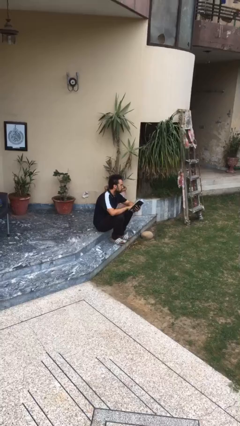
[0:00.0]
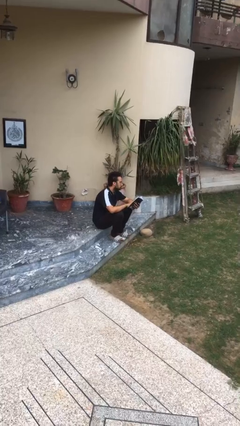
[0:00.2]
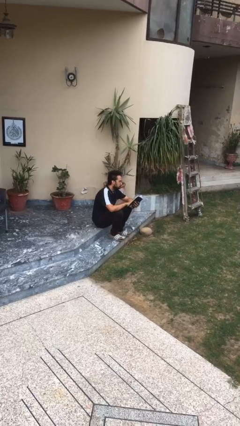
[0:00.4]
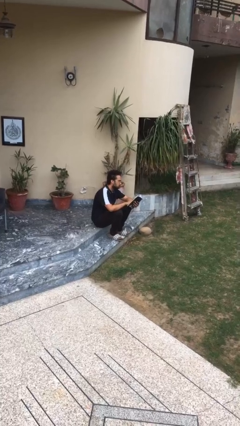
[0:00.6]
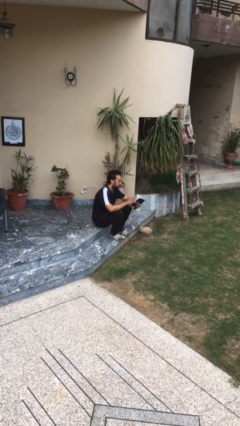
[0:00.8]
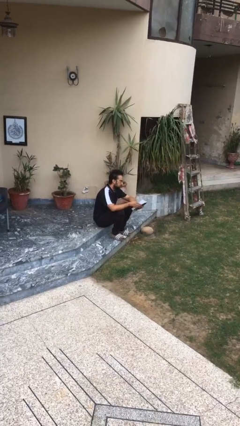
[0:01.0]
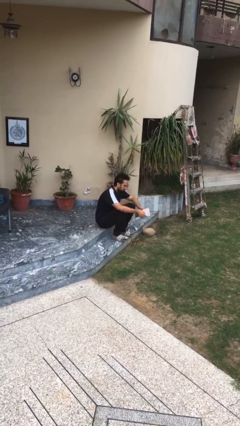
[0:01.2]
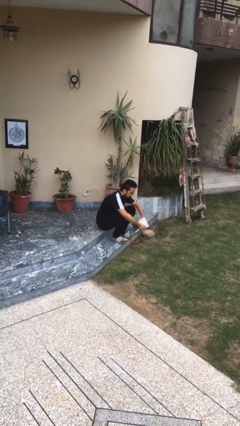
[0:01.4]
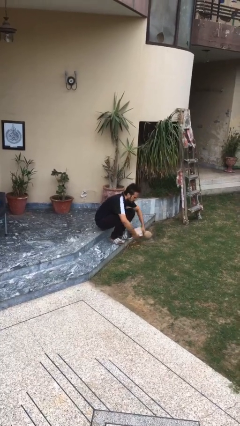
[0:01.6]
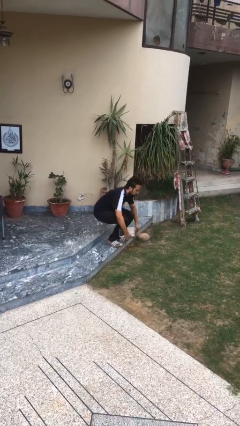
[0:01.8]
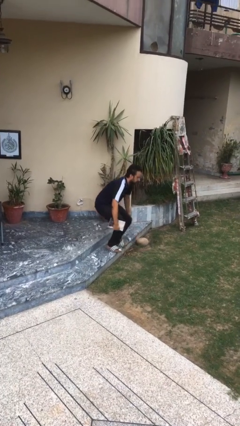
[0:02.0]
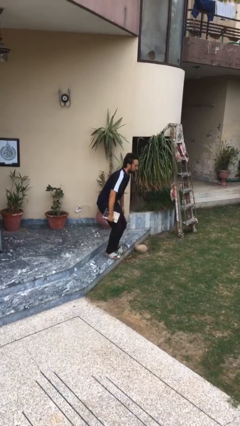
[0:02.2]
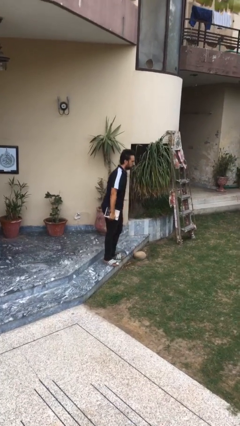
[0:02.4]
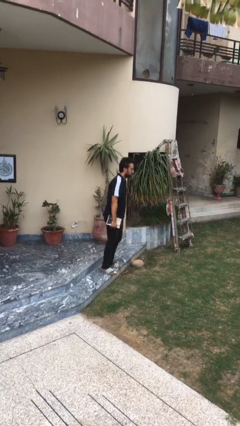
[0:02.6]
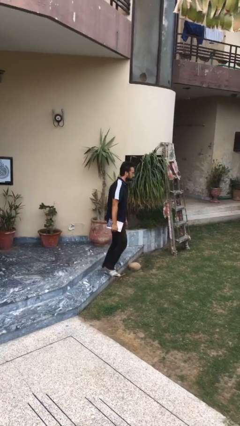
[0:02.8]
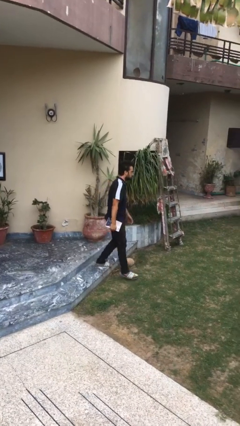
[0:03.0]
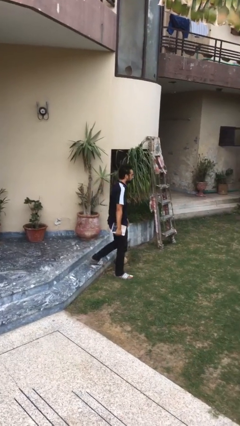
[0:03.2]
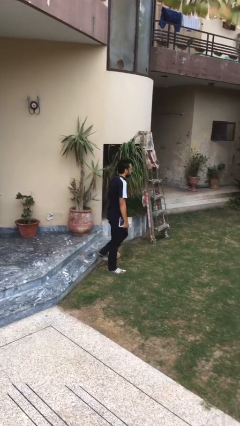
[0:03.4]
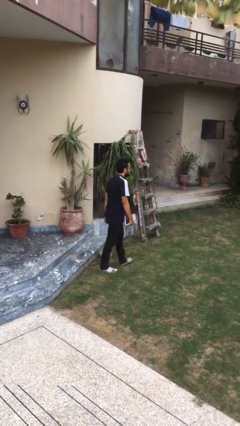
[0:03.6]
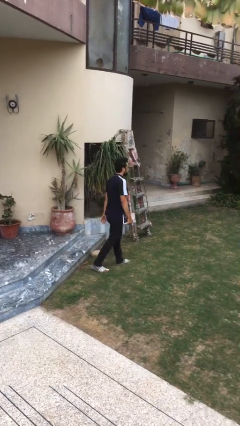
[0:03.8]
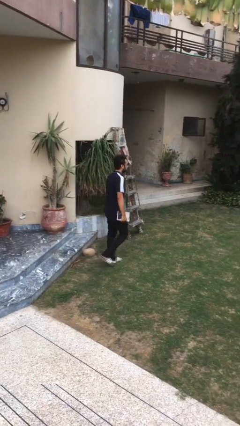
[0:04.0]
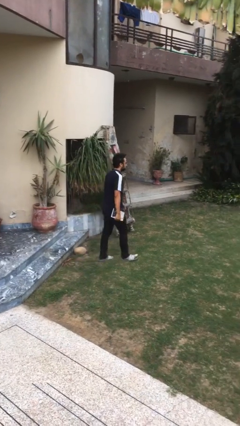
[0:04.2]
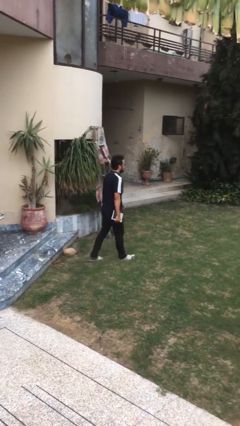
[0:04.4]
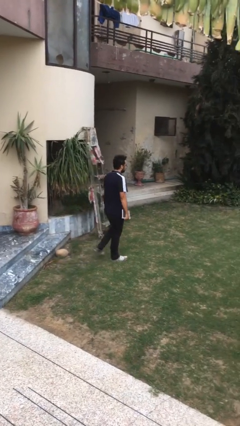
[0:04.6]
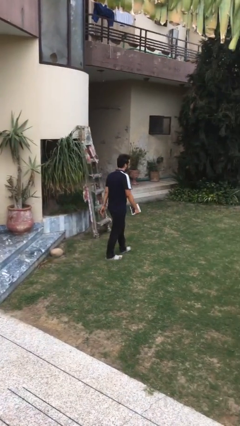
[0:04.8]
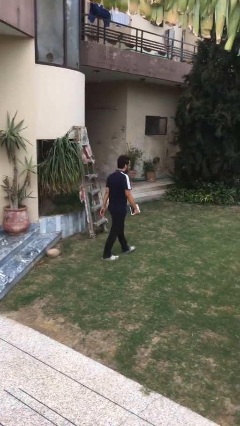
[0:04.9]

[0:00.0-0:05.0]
person stands up

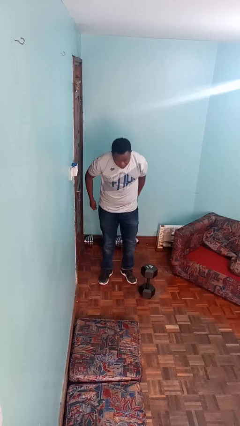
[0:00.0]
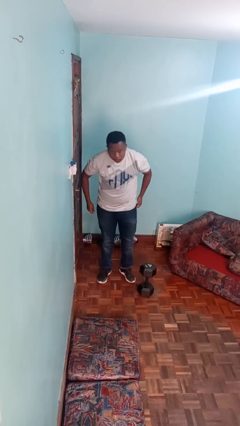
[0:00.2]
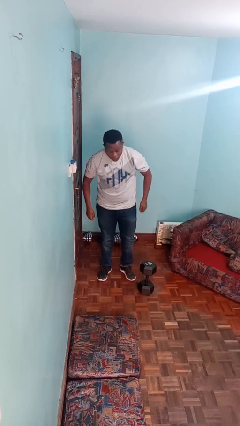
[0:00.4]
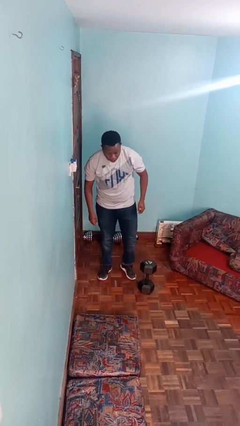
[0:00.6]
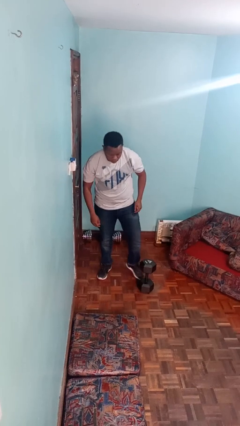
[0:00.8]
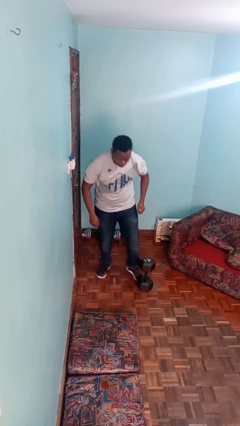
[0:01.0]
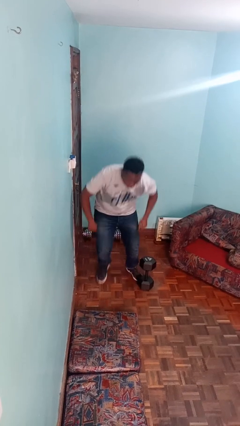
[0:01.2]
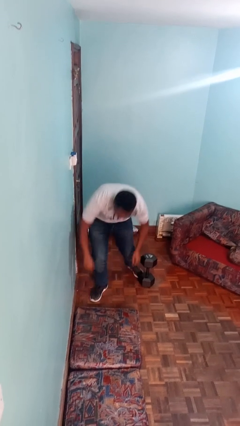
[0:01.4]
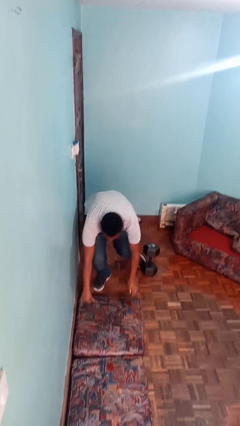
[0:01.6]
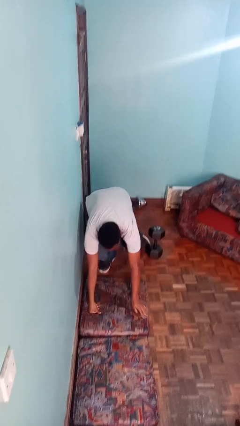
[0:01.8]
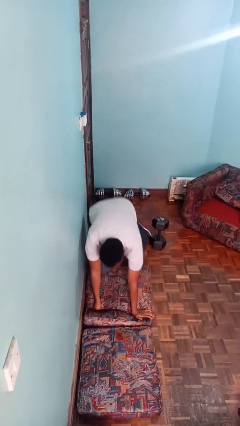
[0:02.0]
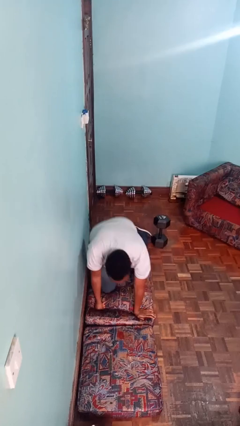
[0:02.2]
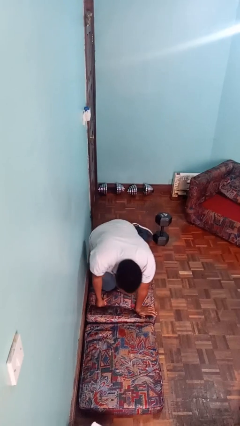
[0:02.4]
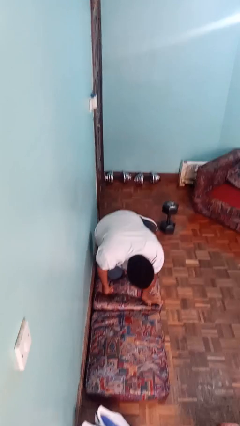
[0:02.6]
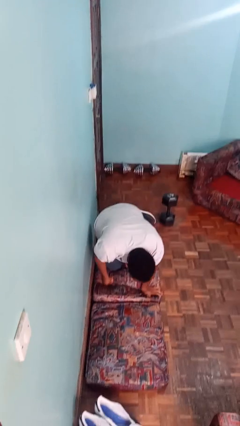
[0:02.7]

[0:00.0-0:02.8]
person trips on object on floor

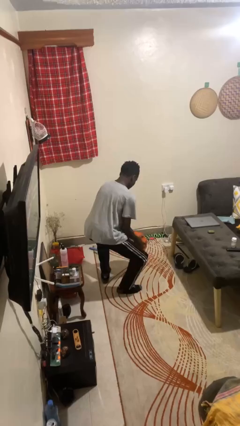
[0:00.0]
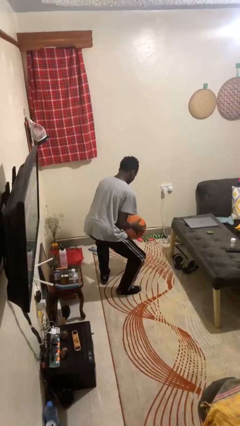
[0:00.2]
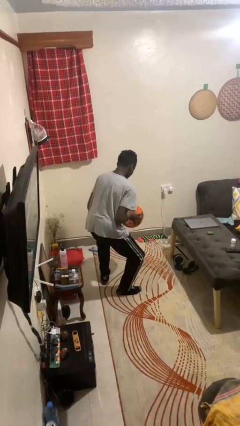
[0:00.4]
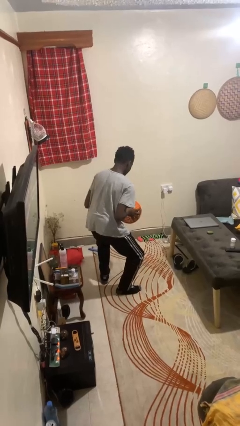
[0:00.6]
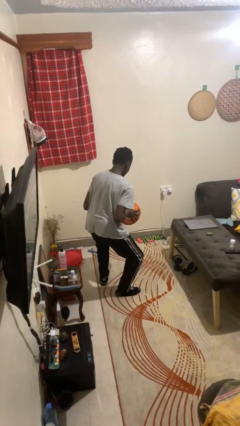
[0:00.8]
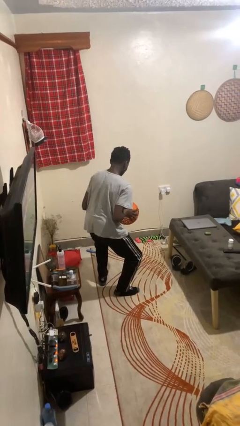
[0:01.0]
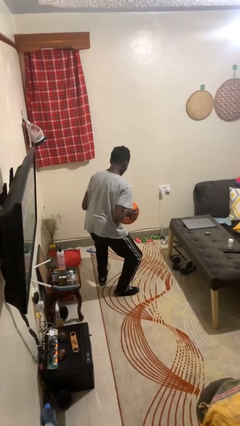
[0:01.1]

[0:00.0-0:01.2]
person bounces ball on floor

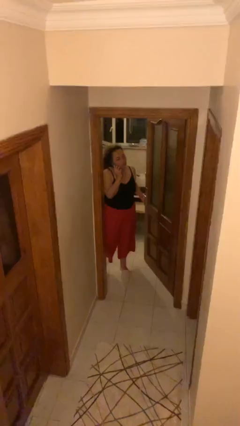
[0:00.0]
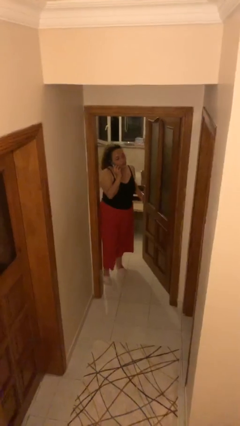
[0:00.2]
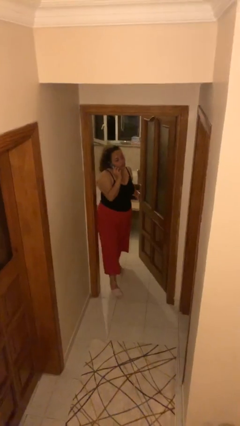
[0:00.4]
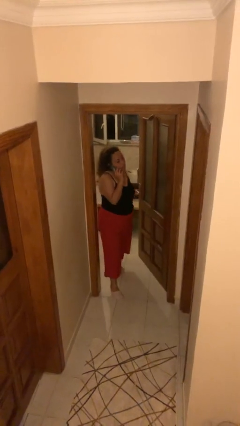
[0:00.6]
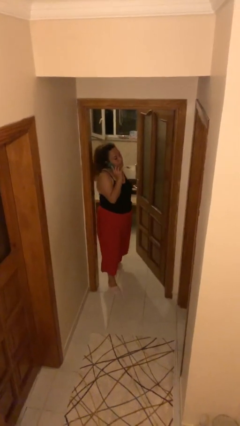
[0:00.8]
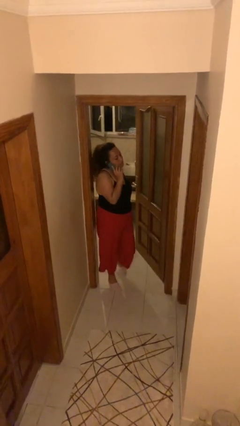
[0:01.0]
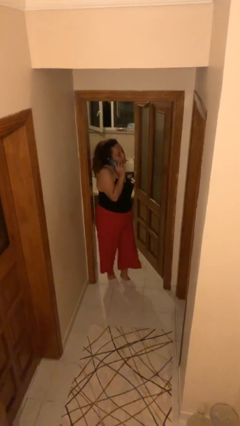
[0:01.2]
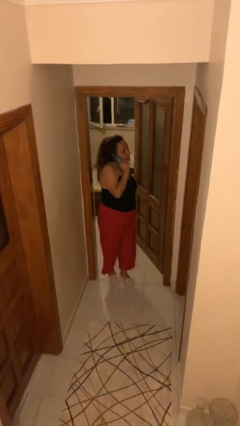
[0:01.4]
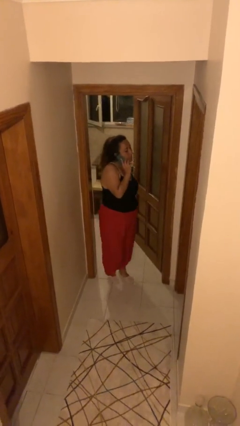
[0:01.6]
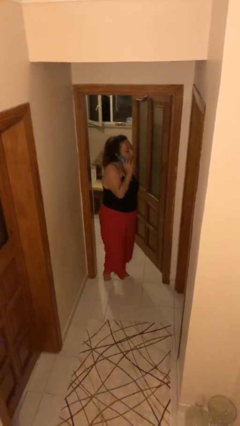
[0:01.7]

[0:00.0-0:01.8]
person enters scene through structure

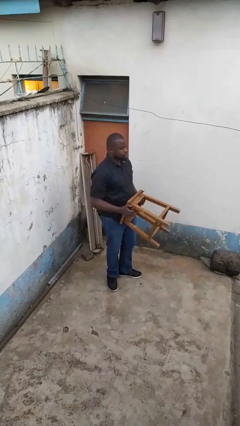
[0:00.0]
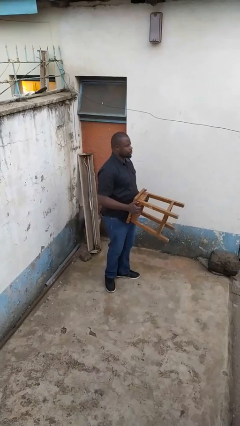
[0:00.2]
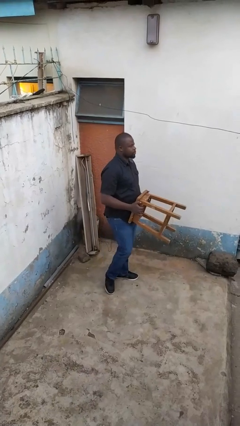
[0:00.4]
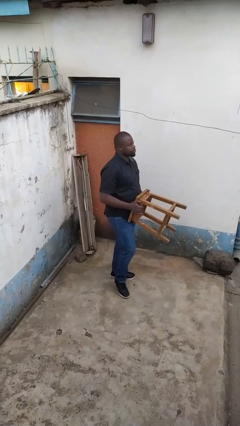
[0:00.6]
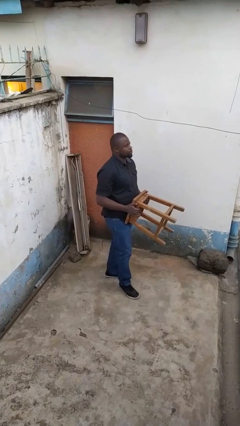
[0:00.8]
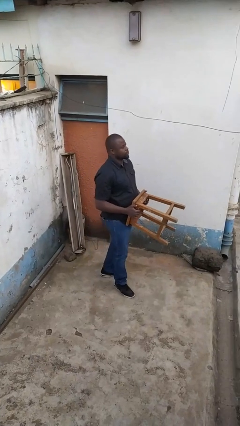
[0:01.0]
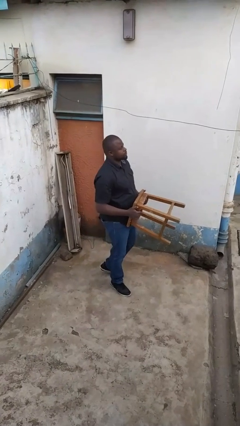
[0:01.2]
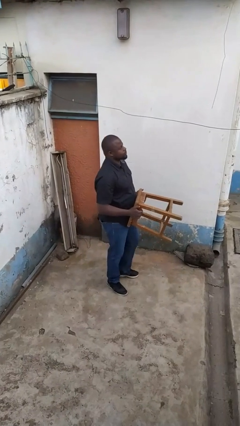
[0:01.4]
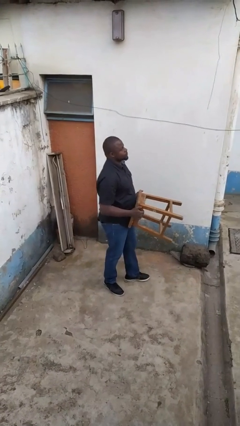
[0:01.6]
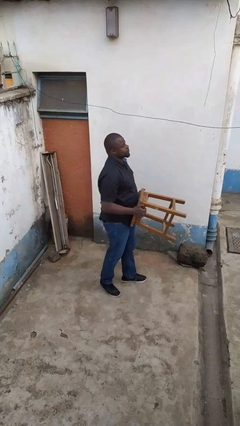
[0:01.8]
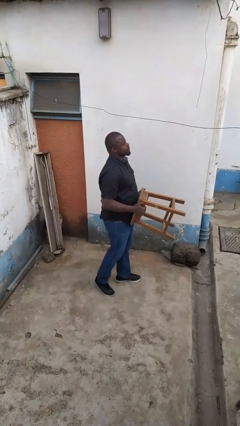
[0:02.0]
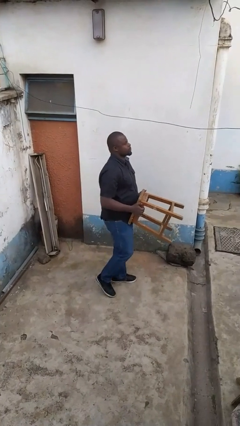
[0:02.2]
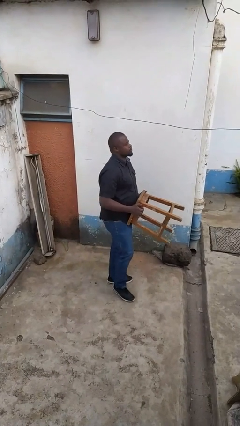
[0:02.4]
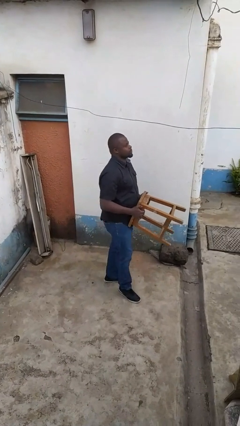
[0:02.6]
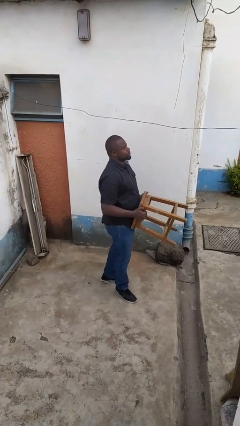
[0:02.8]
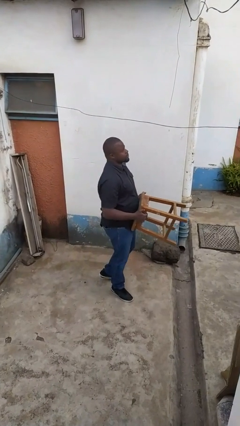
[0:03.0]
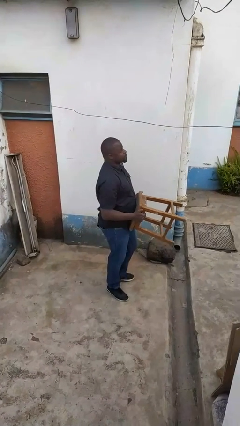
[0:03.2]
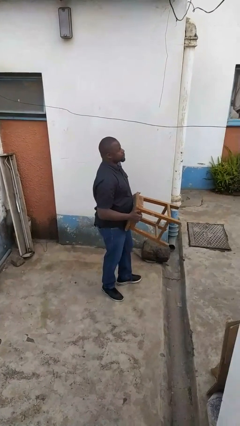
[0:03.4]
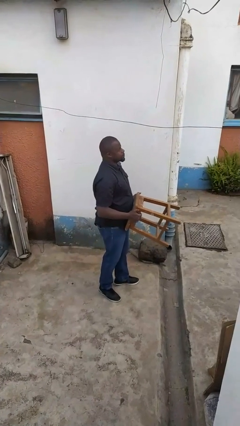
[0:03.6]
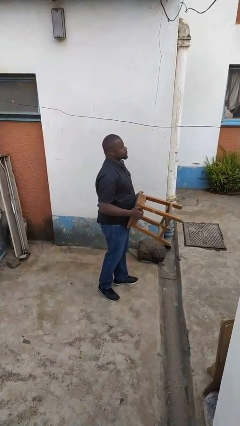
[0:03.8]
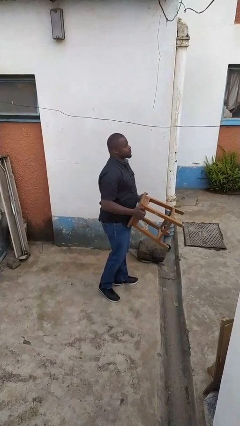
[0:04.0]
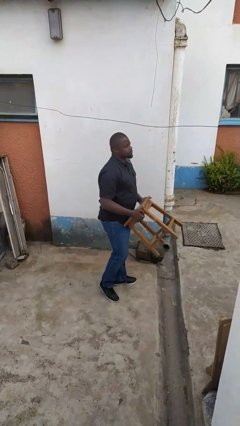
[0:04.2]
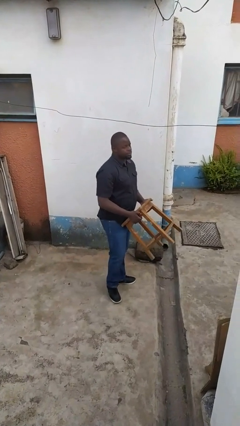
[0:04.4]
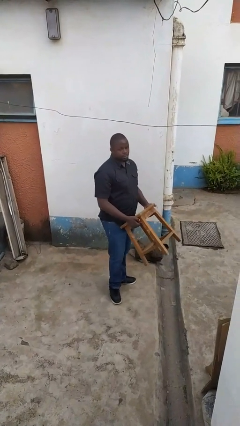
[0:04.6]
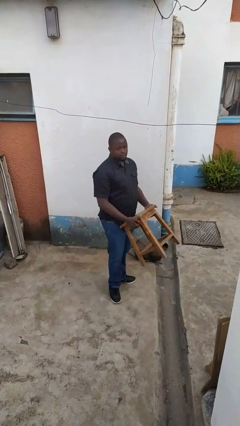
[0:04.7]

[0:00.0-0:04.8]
person carries furniture

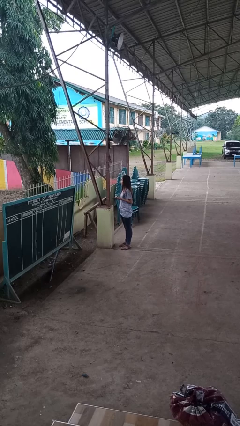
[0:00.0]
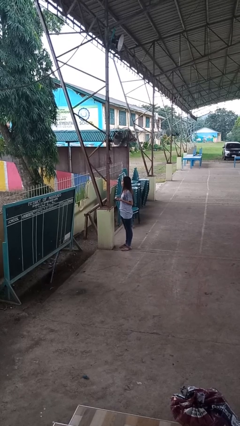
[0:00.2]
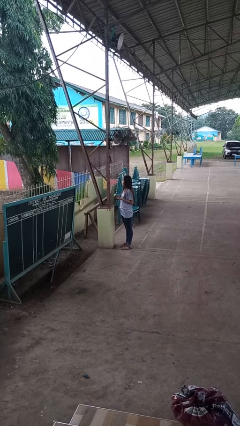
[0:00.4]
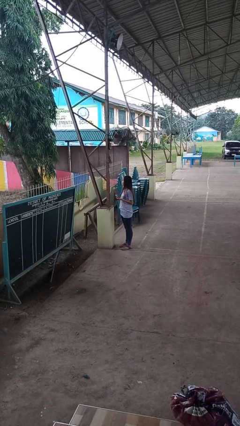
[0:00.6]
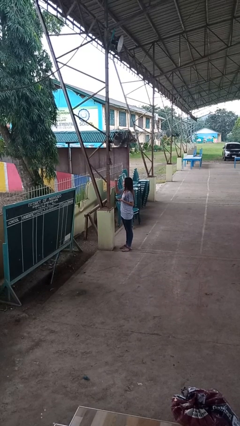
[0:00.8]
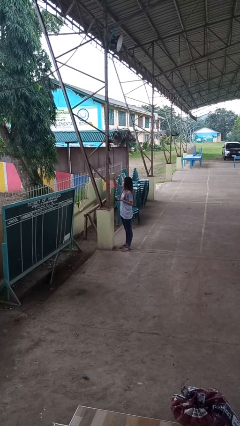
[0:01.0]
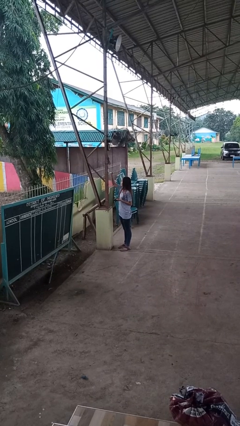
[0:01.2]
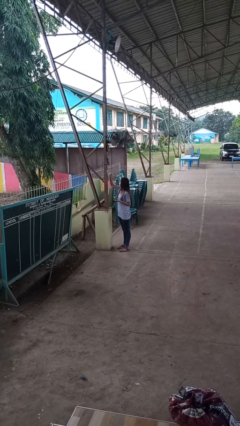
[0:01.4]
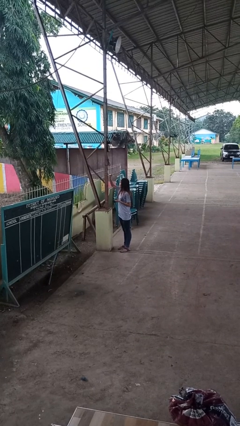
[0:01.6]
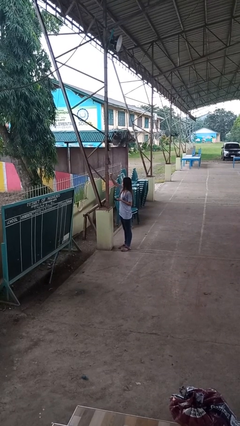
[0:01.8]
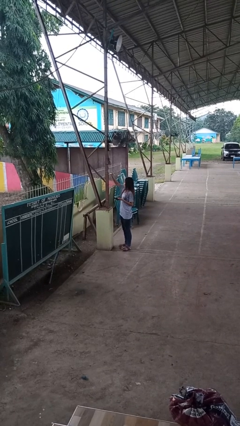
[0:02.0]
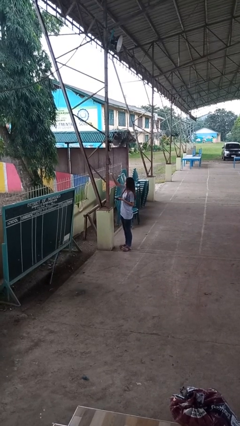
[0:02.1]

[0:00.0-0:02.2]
person plugs into electrical socket
